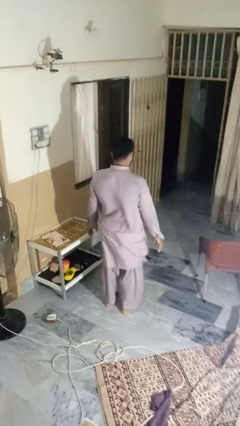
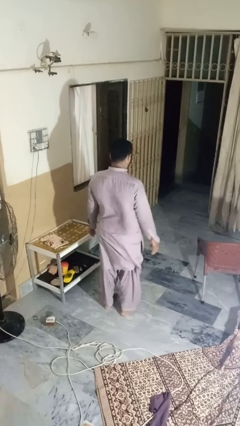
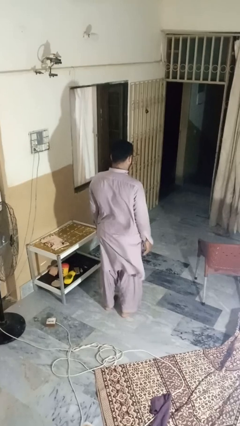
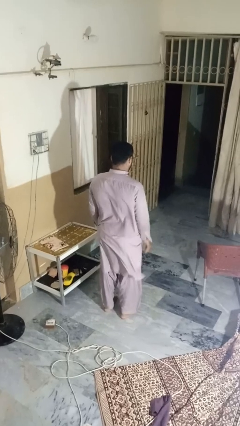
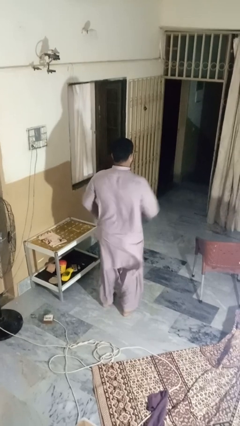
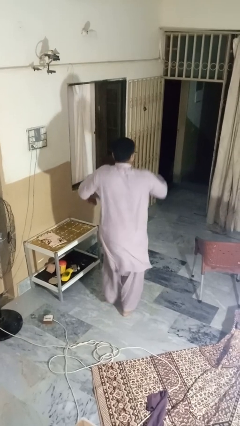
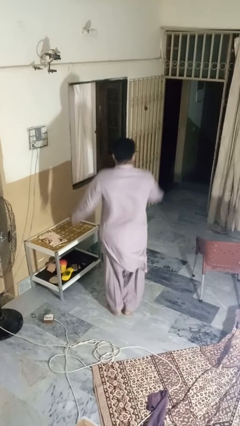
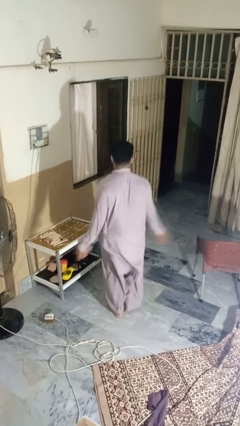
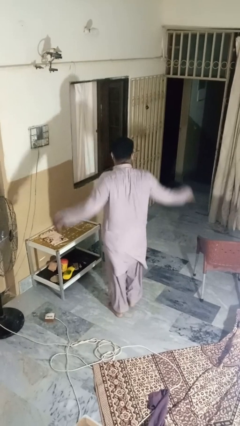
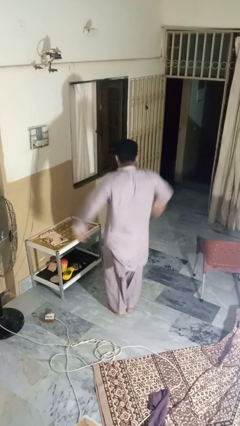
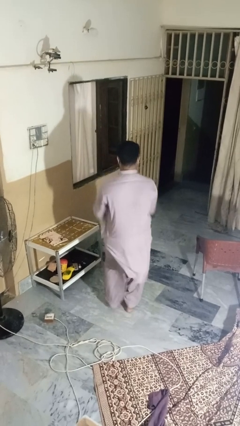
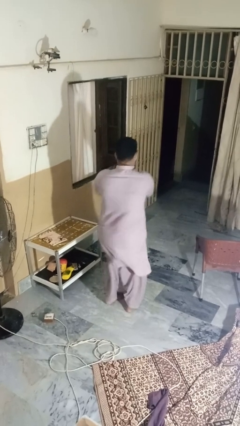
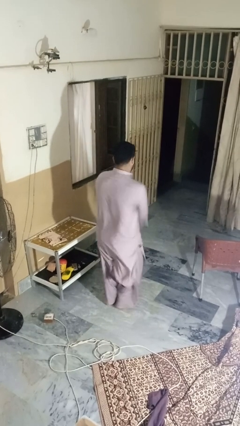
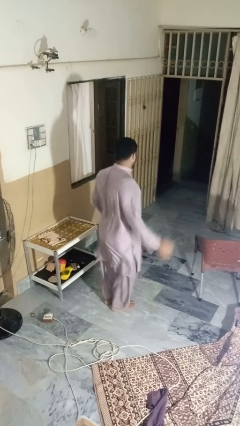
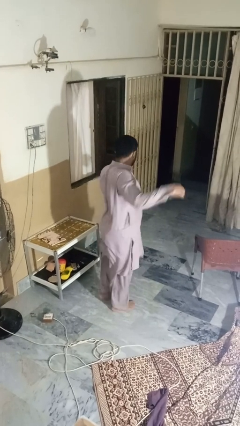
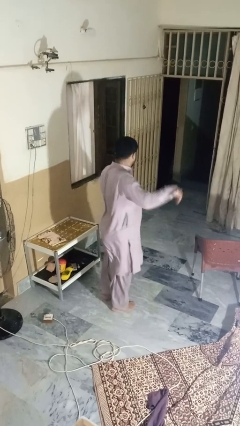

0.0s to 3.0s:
person dances in place

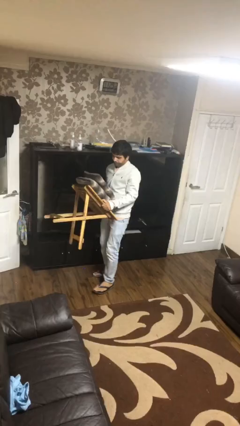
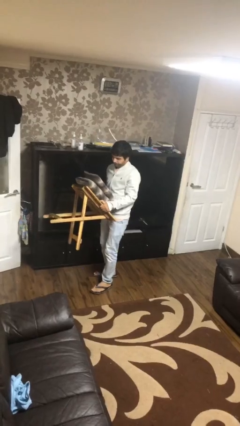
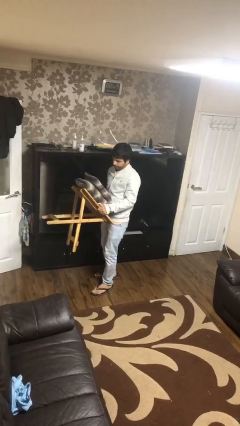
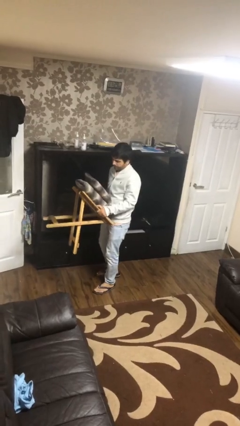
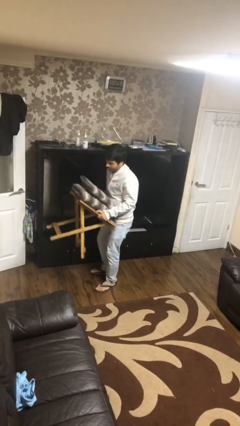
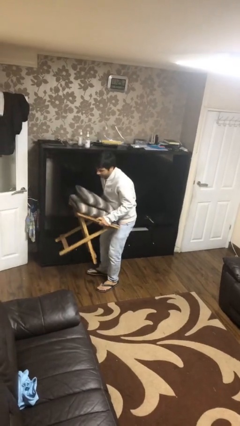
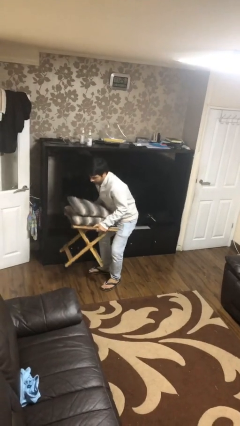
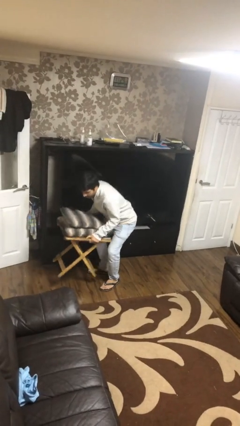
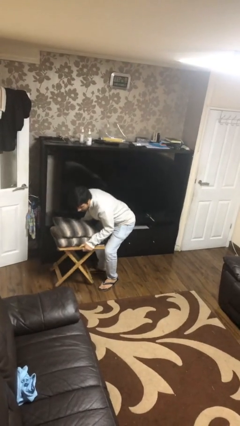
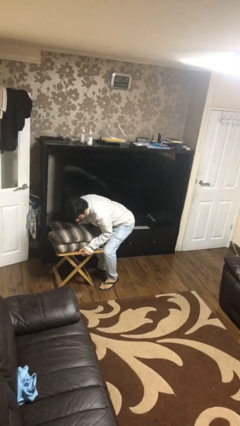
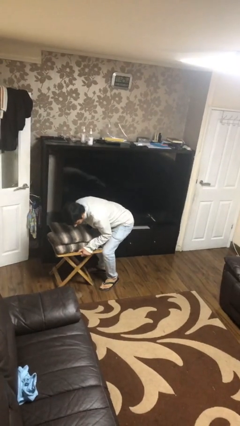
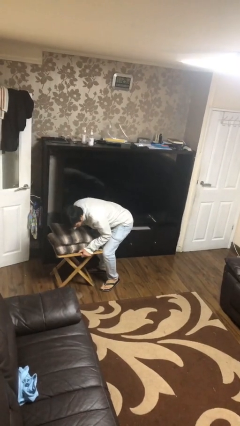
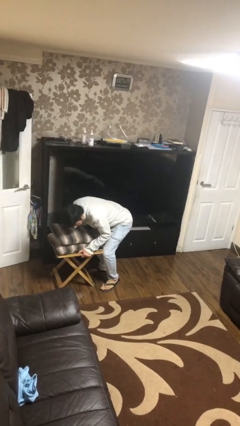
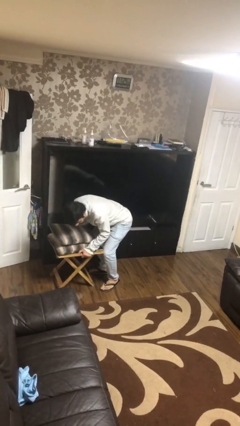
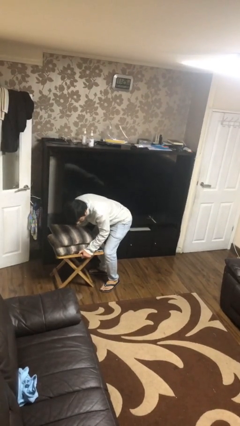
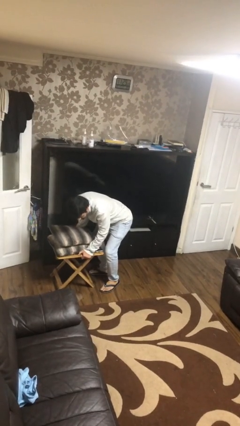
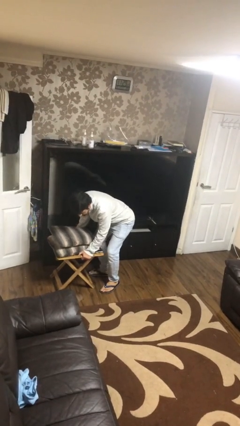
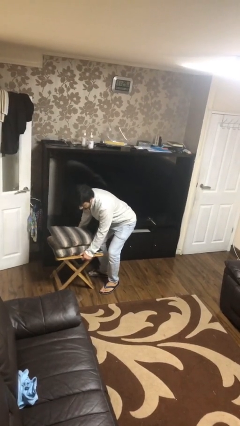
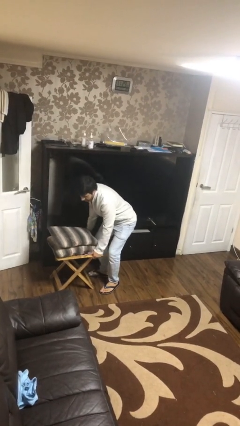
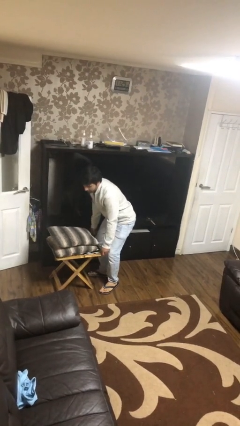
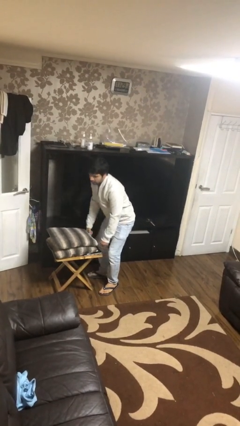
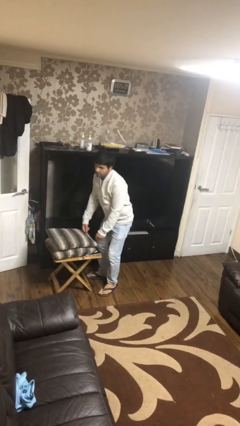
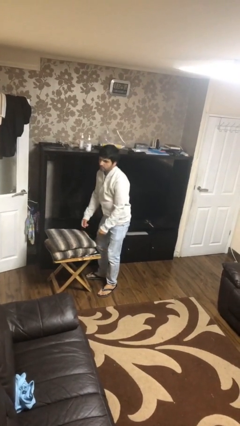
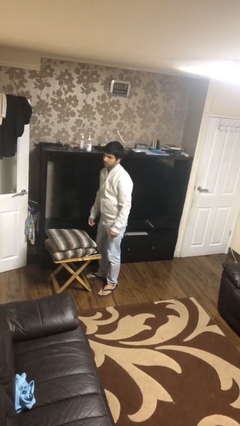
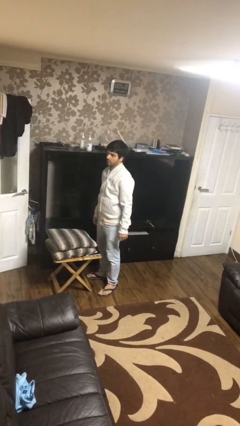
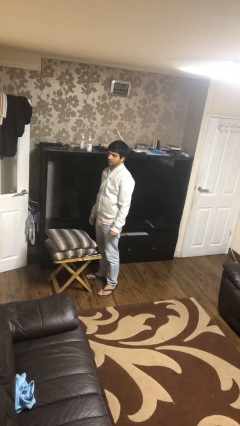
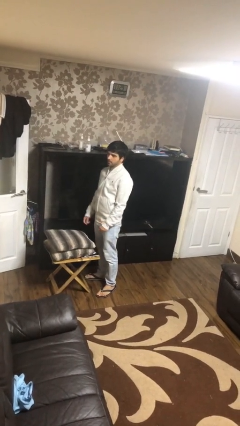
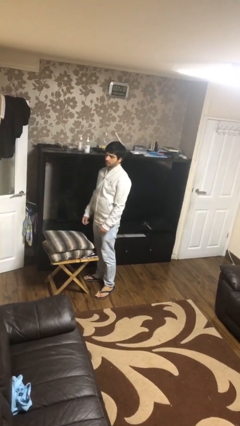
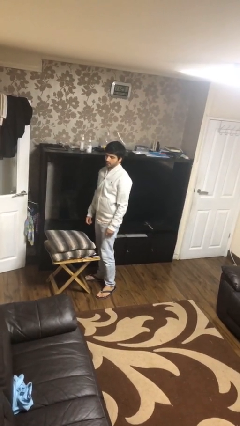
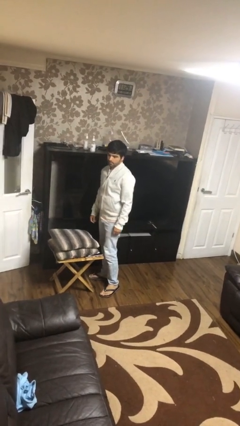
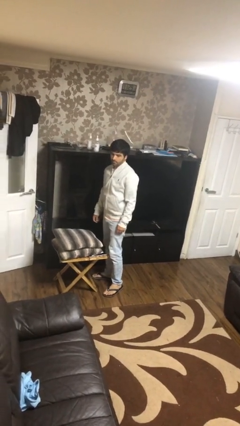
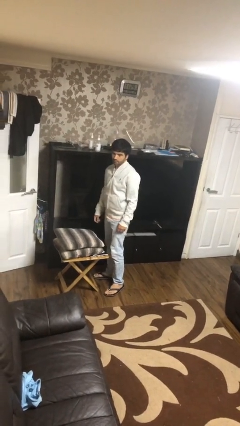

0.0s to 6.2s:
person puts down object on floor

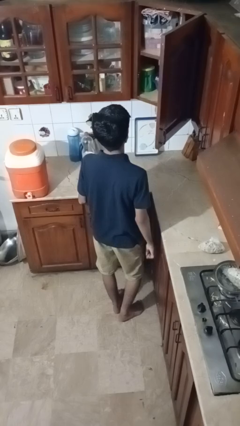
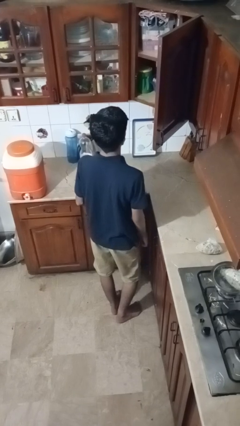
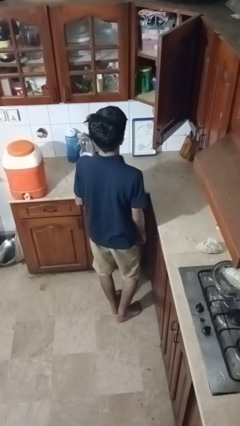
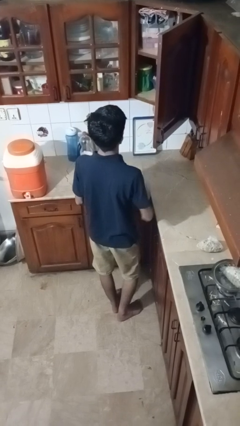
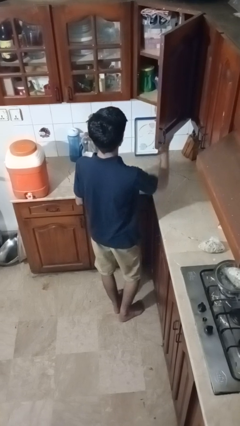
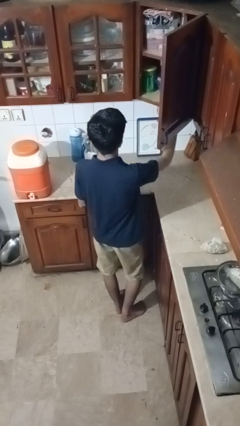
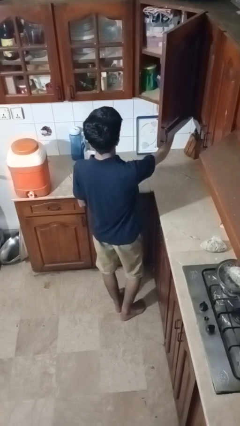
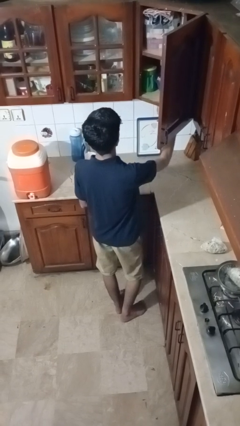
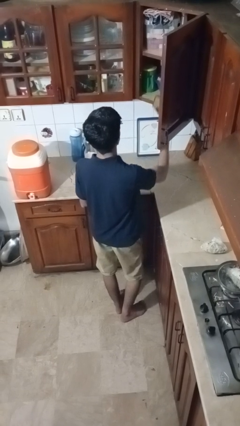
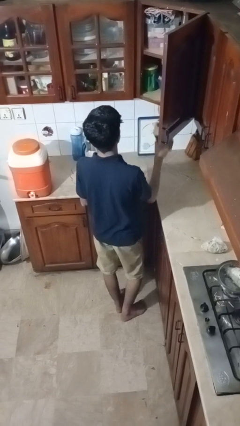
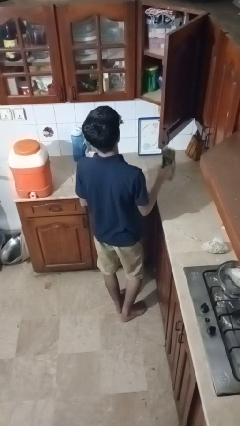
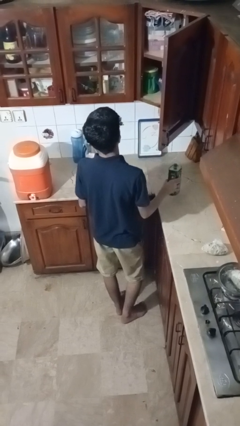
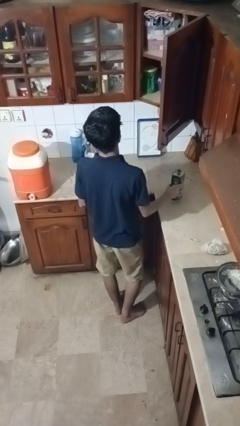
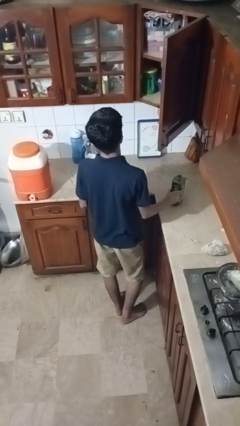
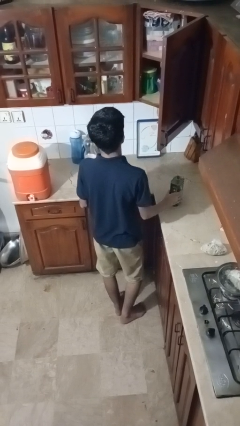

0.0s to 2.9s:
person takes object from cabinet

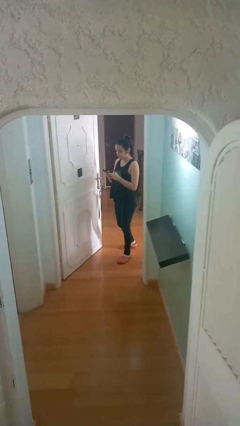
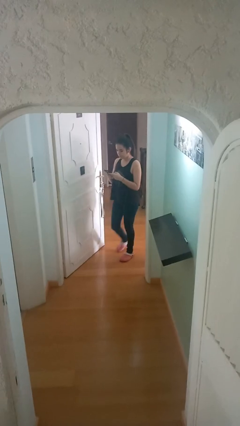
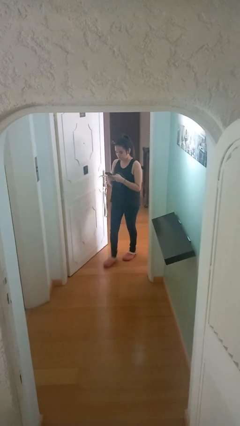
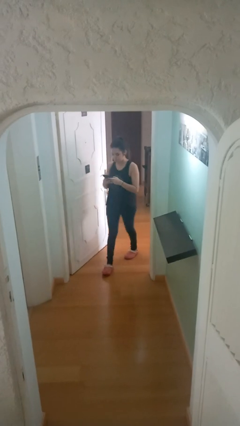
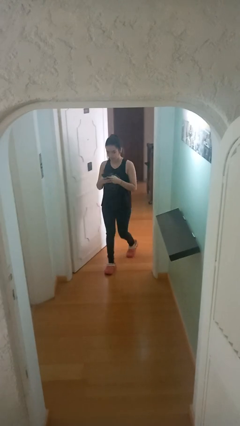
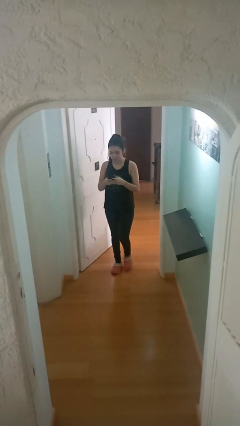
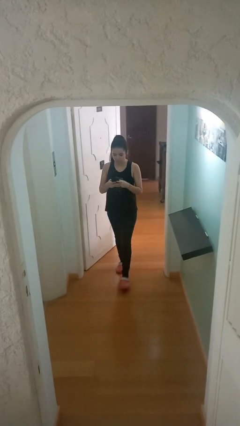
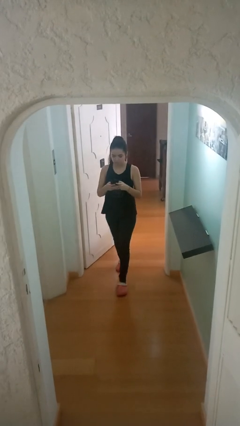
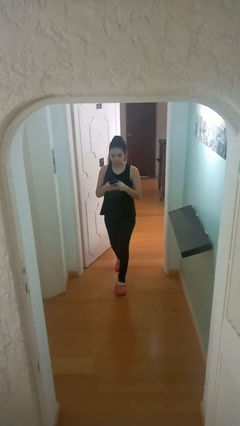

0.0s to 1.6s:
person enters scene through structure

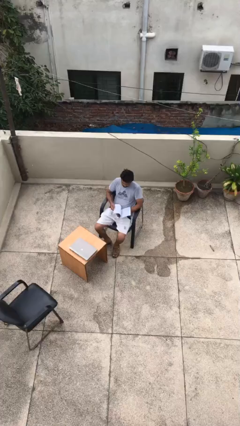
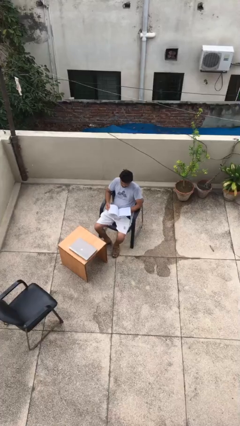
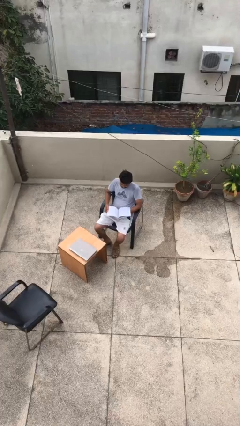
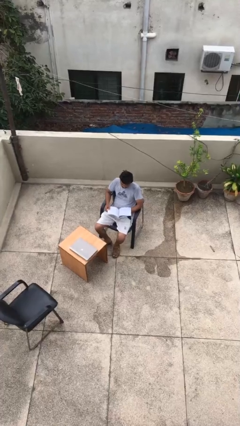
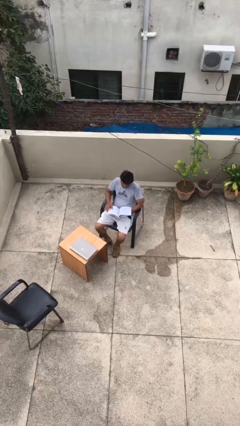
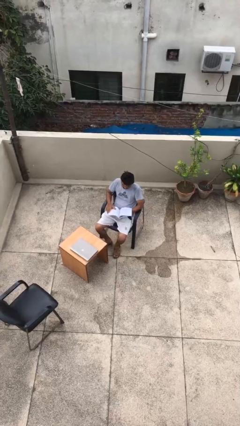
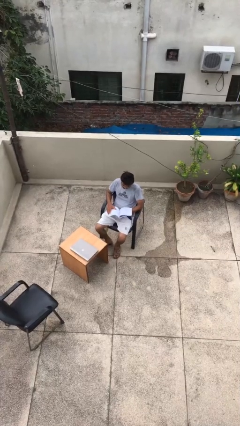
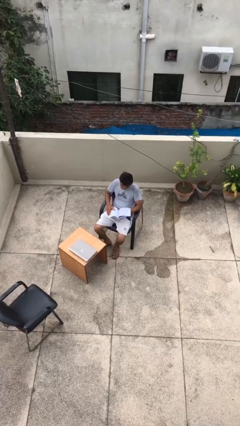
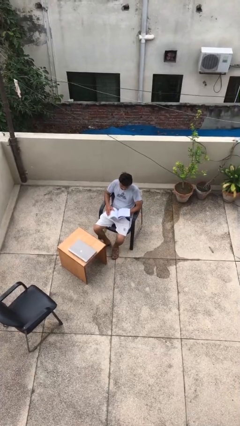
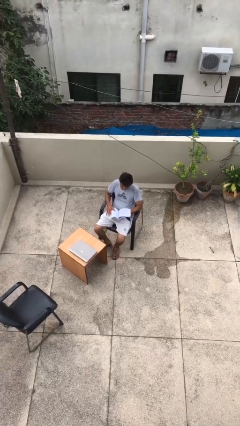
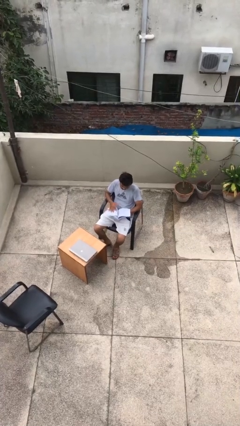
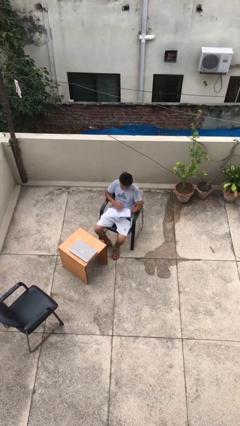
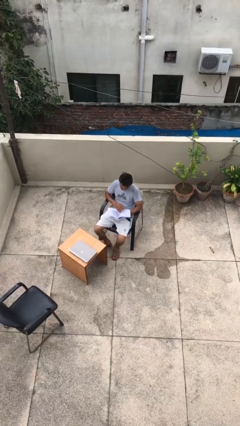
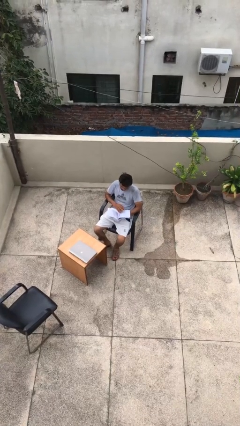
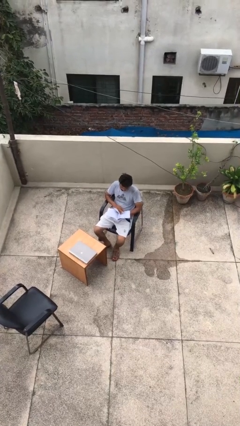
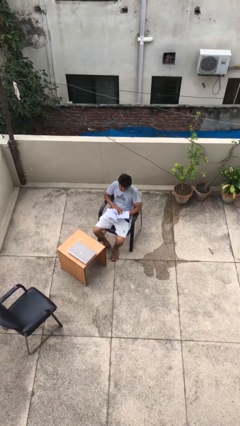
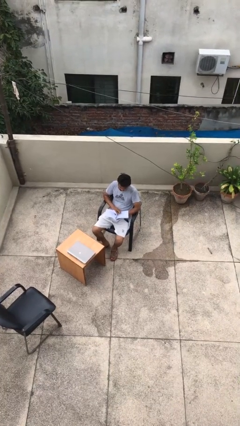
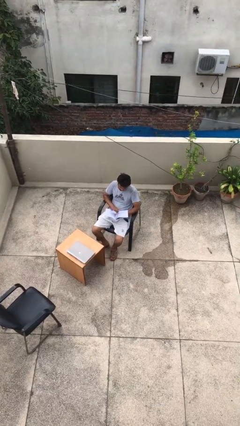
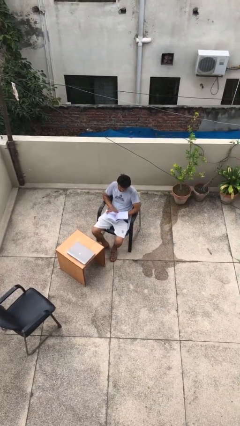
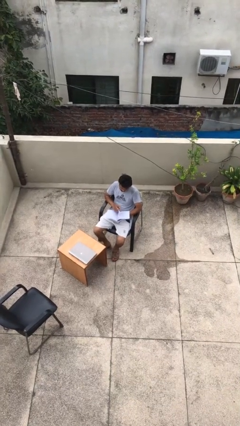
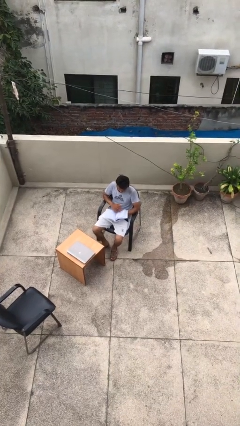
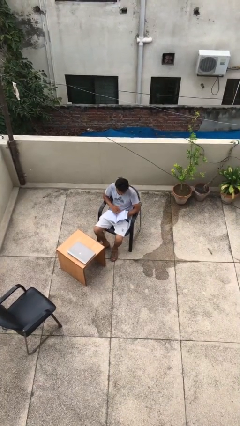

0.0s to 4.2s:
person reads document
